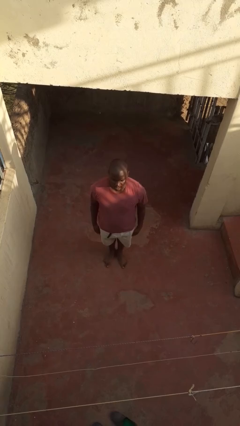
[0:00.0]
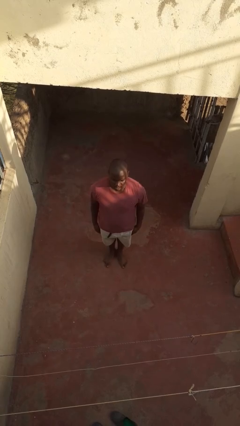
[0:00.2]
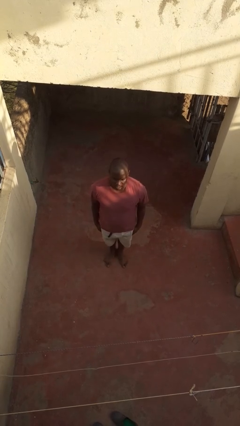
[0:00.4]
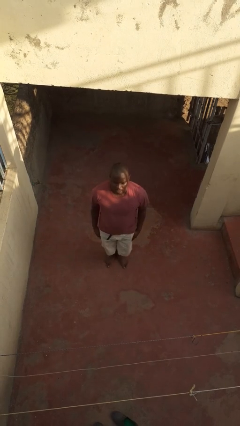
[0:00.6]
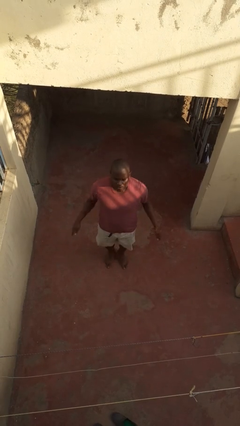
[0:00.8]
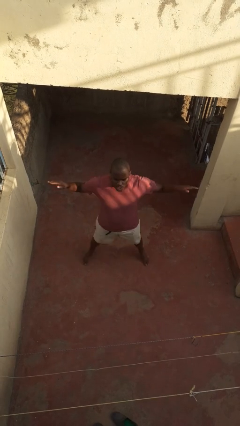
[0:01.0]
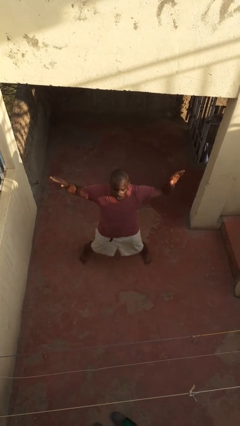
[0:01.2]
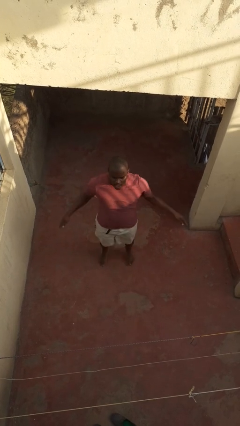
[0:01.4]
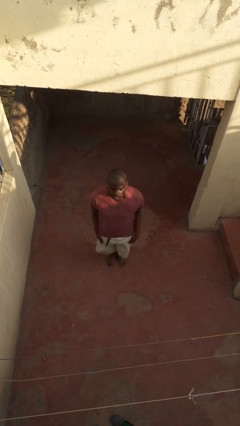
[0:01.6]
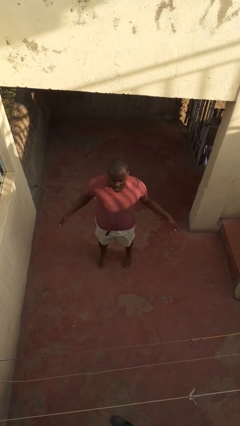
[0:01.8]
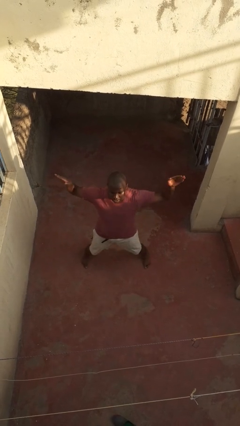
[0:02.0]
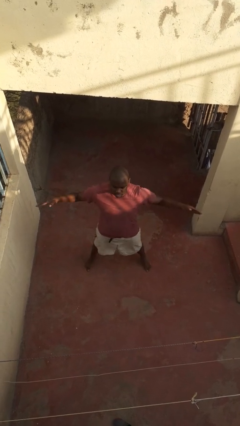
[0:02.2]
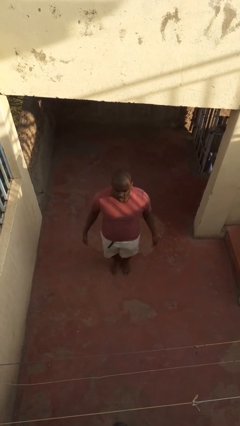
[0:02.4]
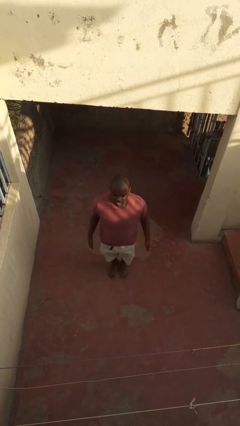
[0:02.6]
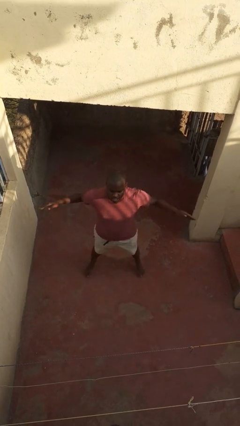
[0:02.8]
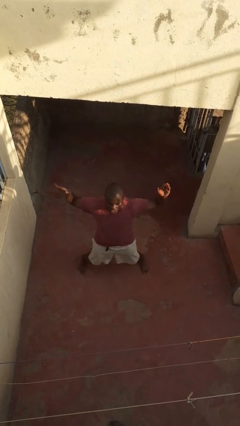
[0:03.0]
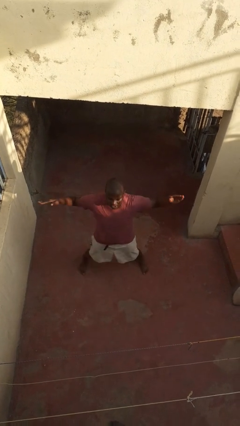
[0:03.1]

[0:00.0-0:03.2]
person exercises with jumping jacks

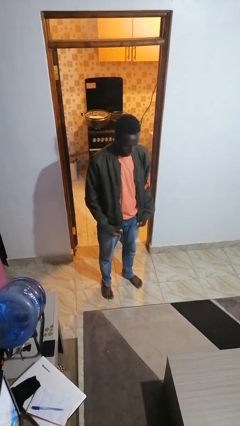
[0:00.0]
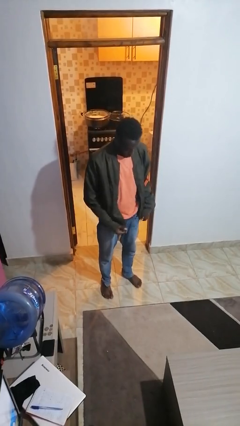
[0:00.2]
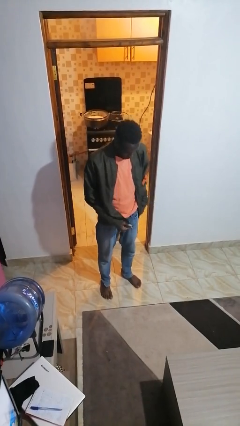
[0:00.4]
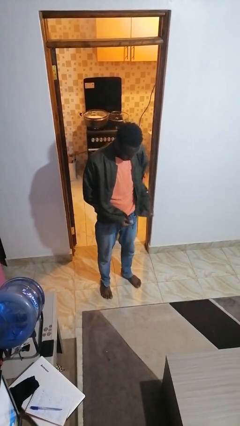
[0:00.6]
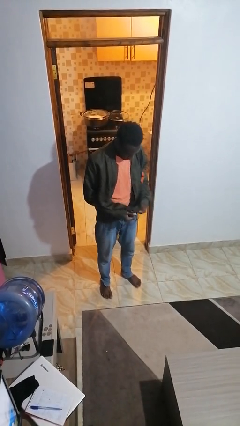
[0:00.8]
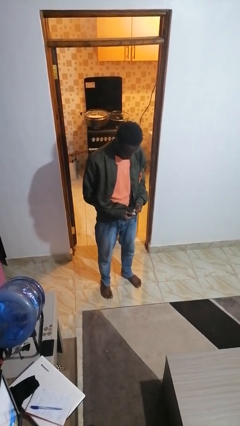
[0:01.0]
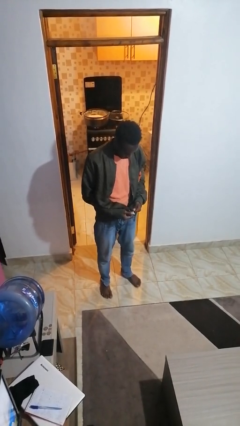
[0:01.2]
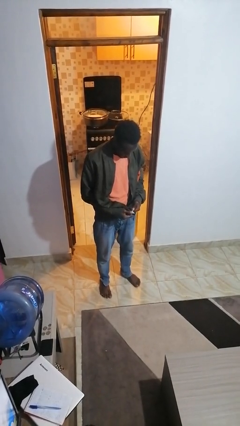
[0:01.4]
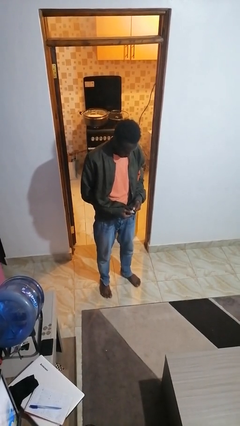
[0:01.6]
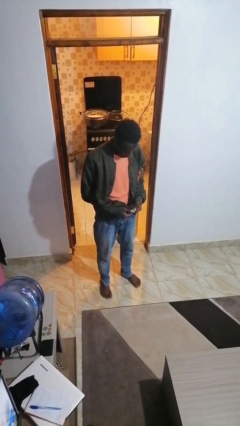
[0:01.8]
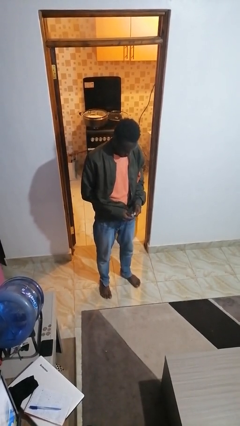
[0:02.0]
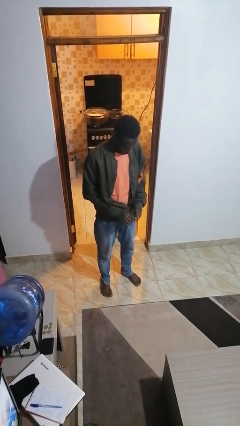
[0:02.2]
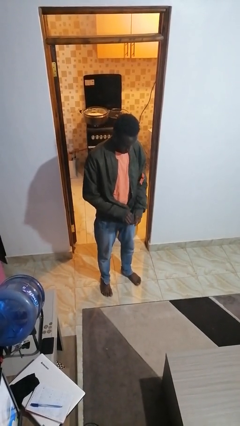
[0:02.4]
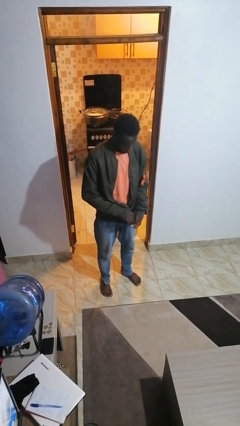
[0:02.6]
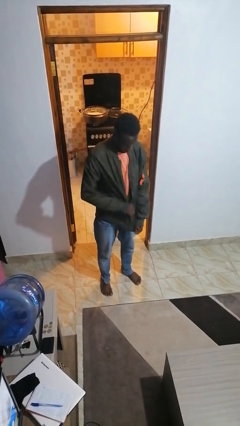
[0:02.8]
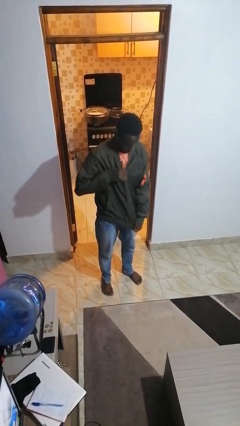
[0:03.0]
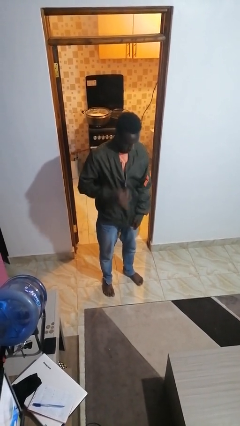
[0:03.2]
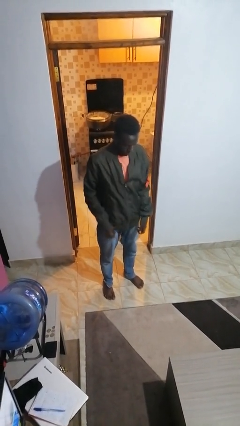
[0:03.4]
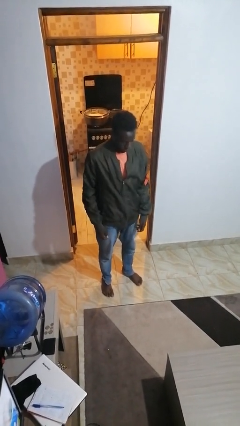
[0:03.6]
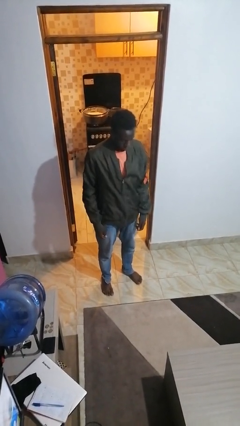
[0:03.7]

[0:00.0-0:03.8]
person zips up jacket

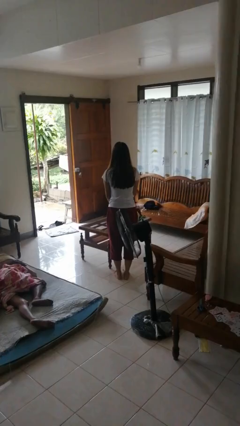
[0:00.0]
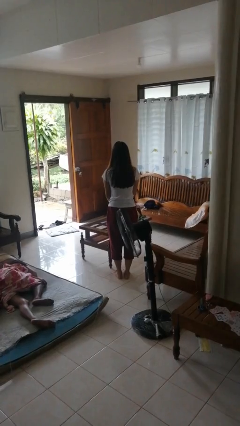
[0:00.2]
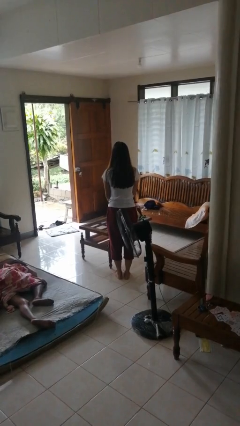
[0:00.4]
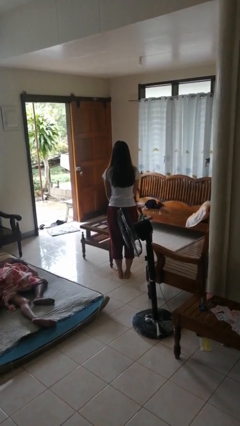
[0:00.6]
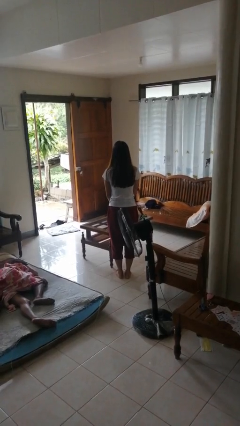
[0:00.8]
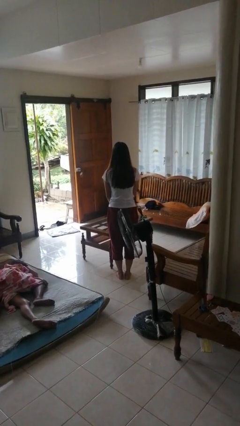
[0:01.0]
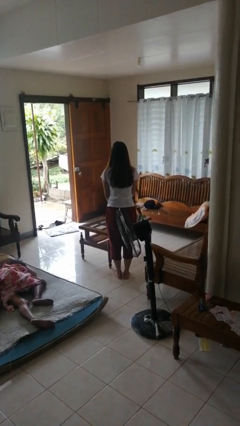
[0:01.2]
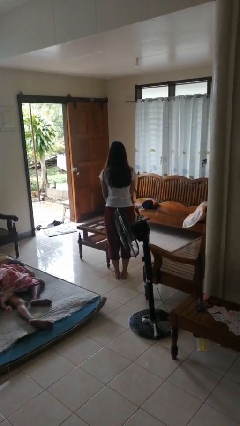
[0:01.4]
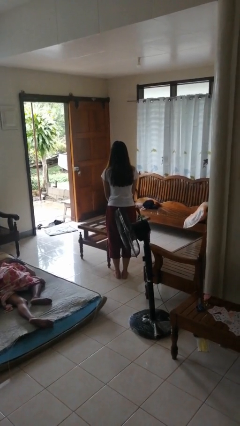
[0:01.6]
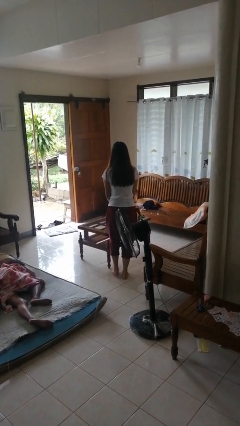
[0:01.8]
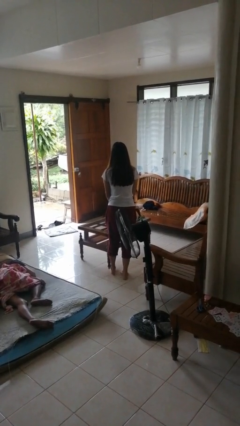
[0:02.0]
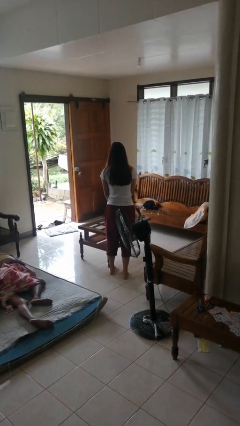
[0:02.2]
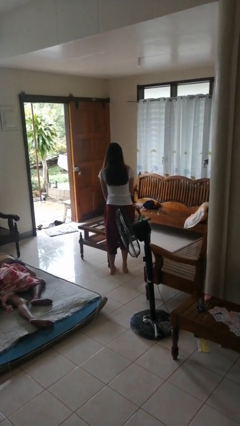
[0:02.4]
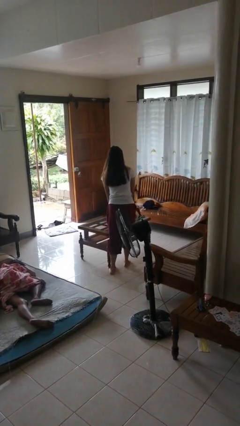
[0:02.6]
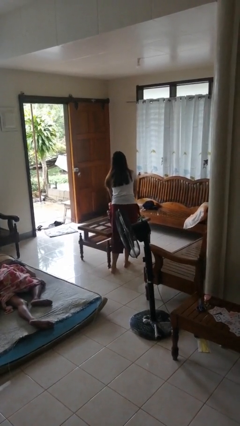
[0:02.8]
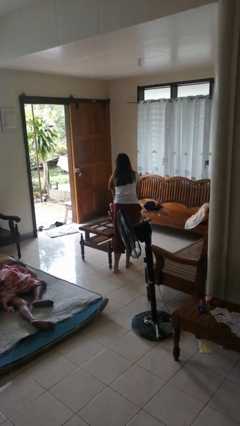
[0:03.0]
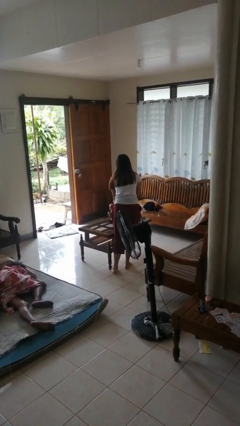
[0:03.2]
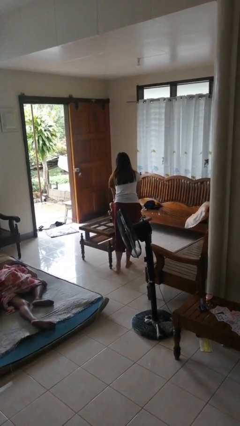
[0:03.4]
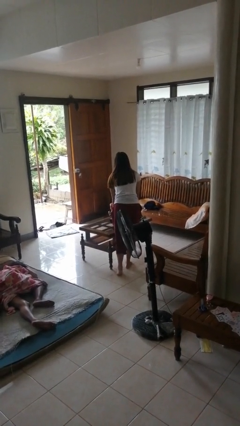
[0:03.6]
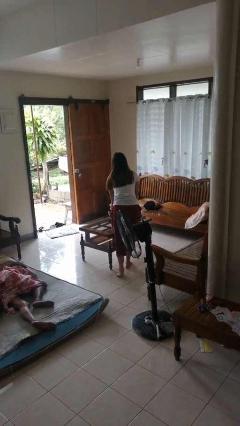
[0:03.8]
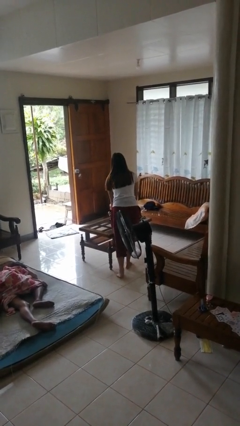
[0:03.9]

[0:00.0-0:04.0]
person bumps into table

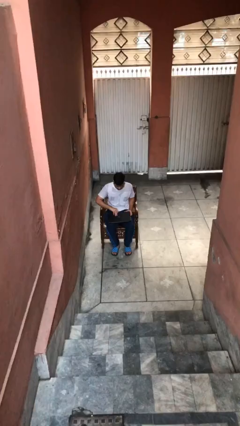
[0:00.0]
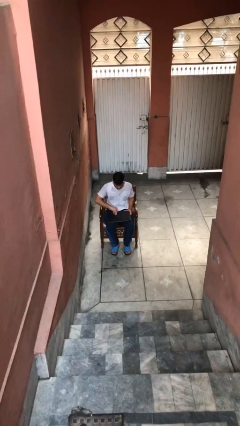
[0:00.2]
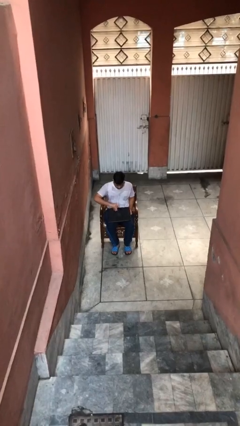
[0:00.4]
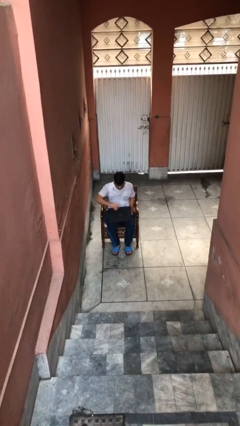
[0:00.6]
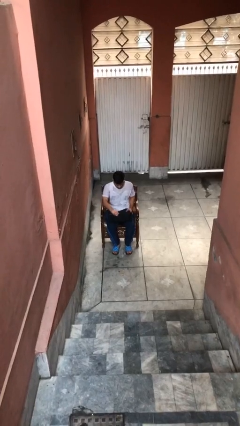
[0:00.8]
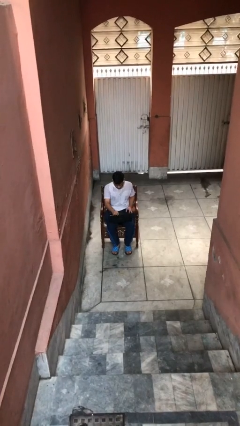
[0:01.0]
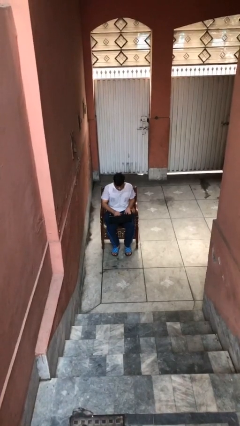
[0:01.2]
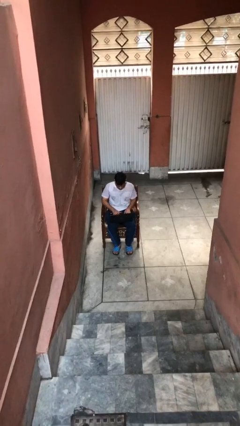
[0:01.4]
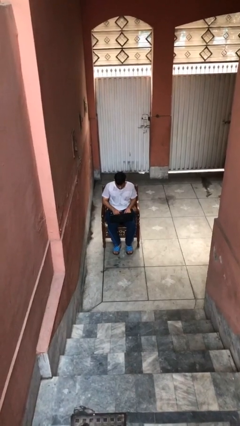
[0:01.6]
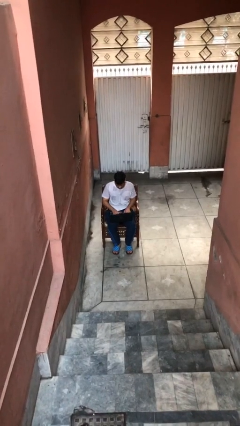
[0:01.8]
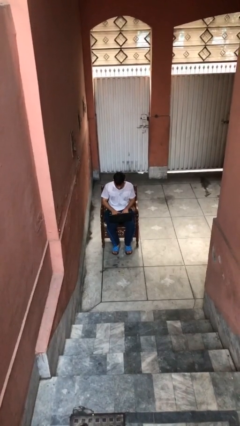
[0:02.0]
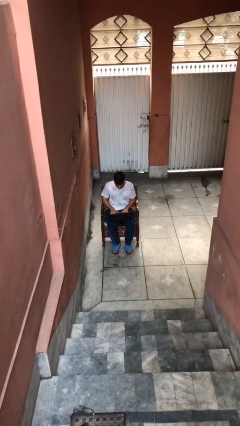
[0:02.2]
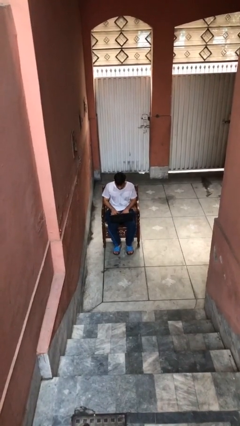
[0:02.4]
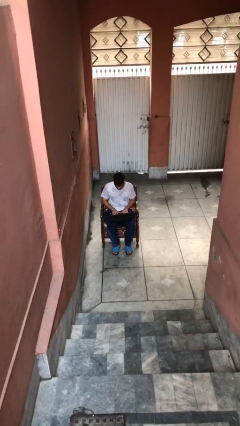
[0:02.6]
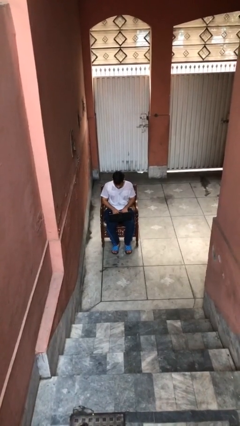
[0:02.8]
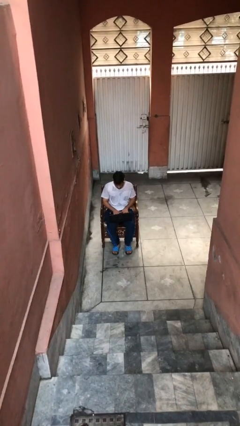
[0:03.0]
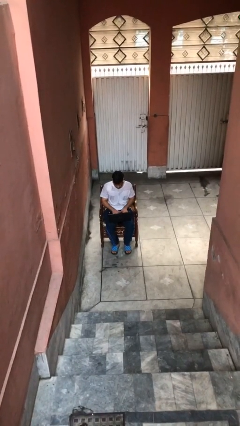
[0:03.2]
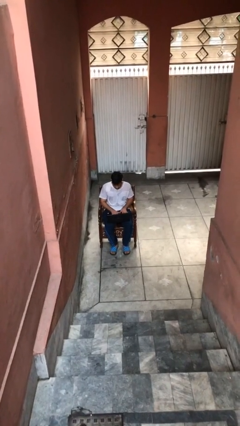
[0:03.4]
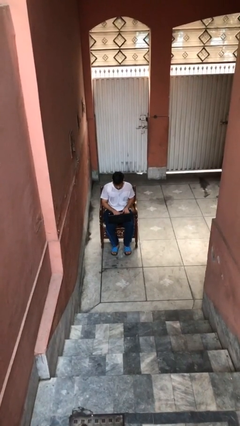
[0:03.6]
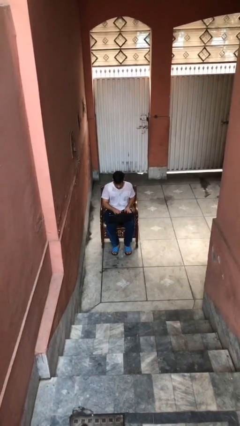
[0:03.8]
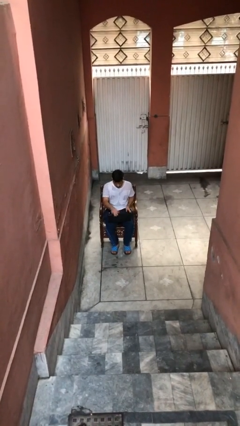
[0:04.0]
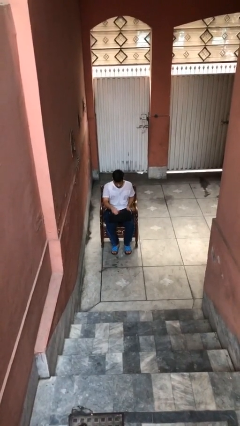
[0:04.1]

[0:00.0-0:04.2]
person interacts with laptop

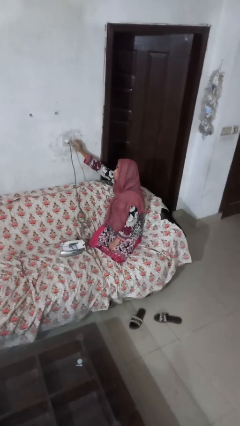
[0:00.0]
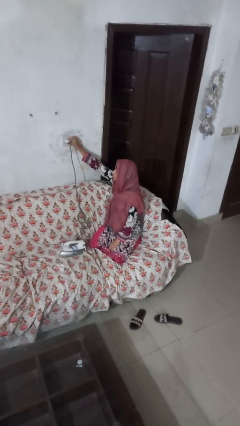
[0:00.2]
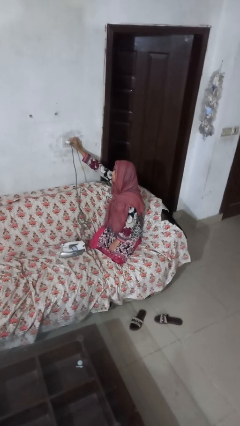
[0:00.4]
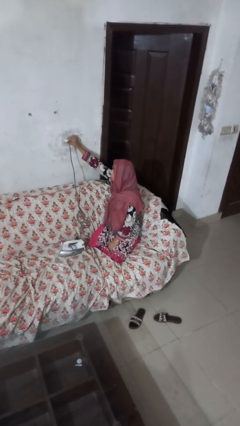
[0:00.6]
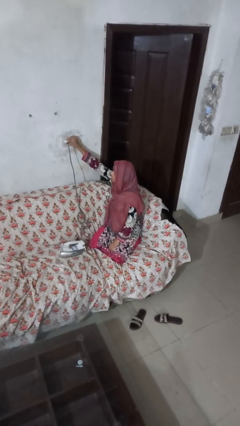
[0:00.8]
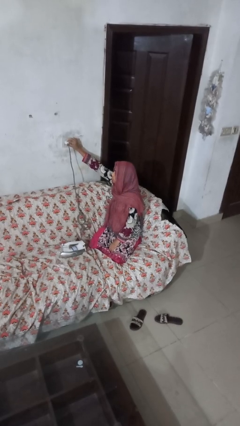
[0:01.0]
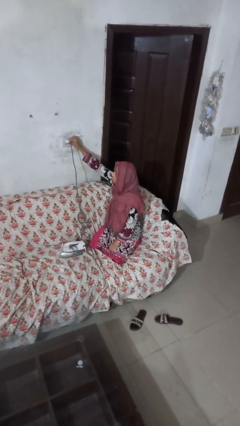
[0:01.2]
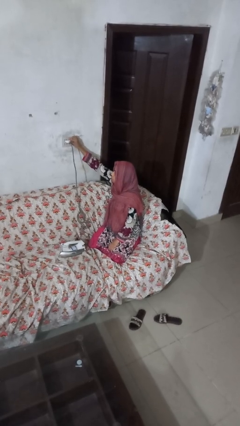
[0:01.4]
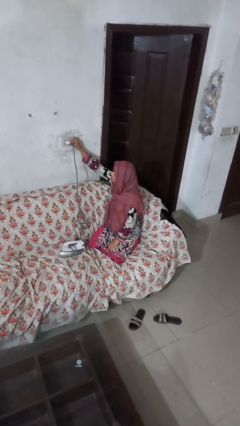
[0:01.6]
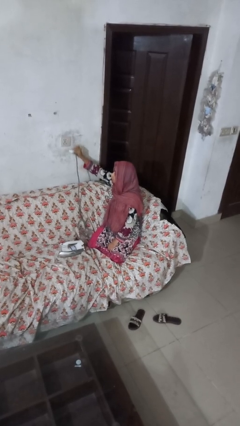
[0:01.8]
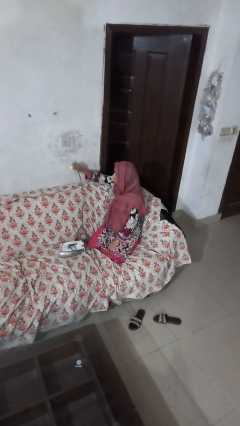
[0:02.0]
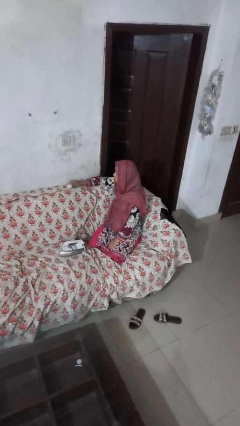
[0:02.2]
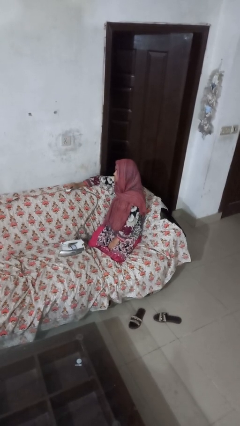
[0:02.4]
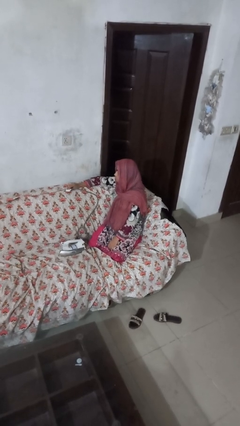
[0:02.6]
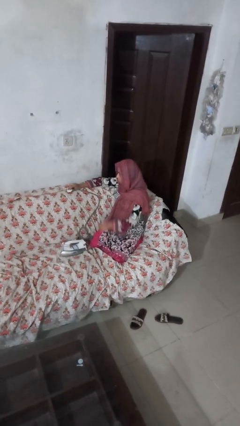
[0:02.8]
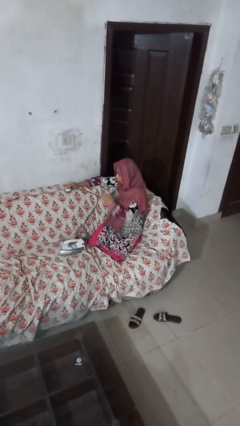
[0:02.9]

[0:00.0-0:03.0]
person unplugs from electrical socket
